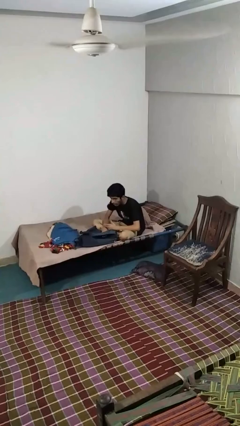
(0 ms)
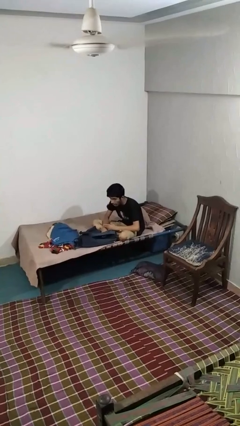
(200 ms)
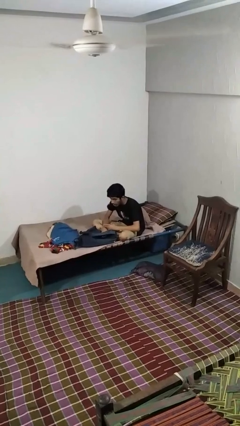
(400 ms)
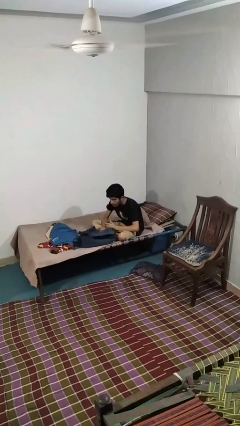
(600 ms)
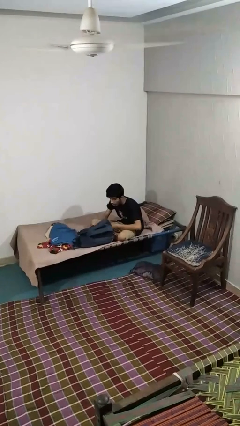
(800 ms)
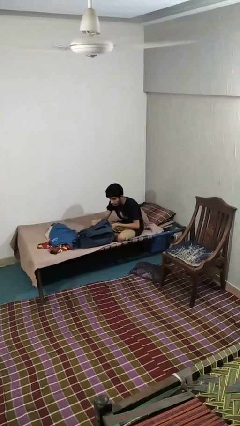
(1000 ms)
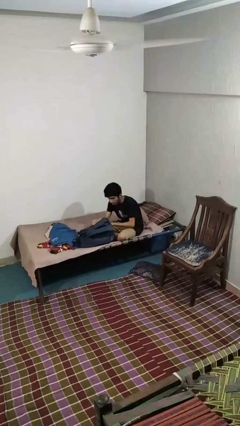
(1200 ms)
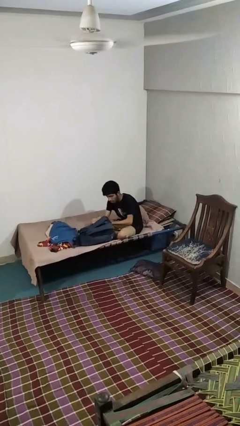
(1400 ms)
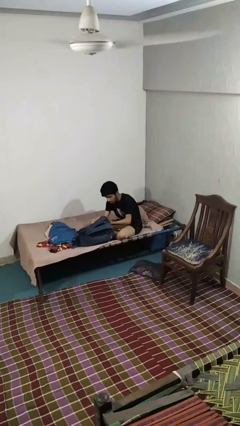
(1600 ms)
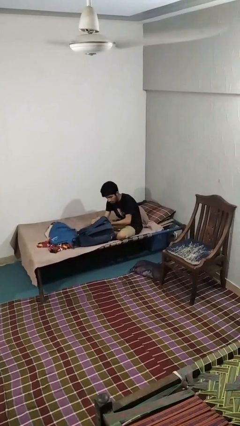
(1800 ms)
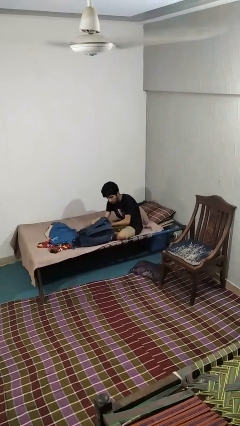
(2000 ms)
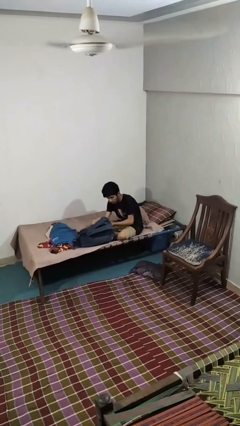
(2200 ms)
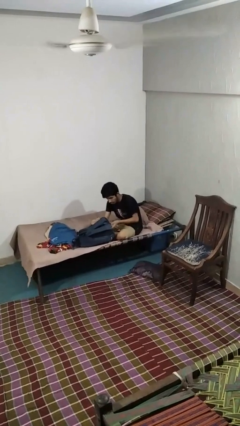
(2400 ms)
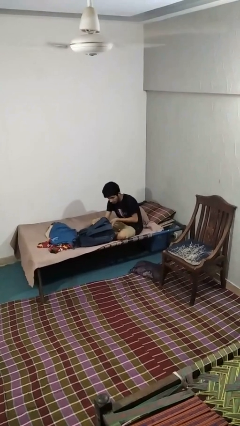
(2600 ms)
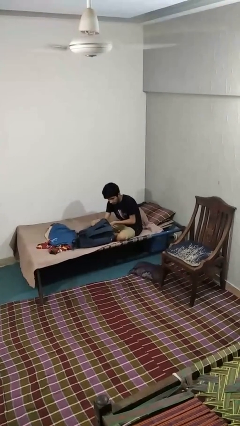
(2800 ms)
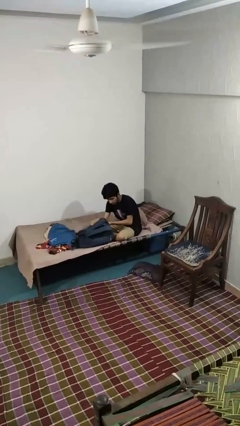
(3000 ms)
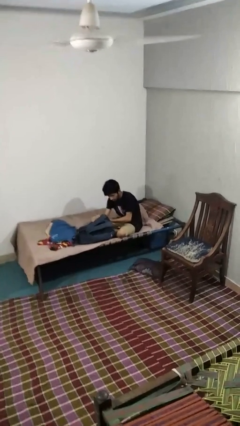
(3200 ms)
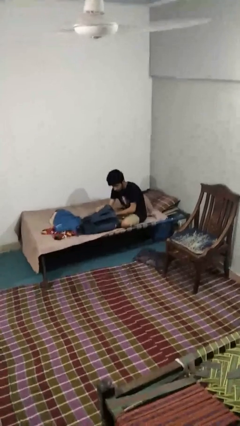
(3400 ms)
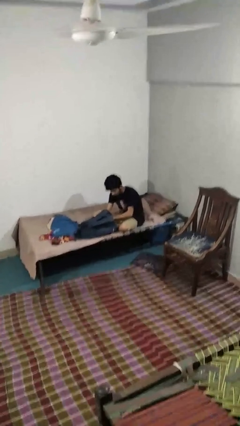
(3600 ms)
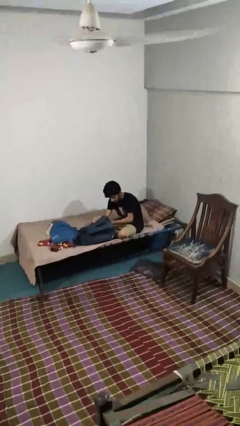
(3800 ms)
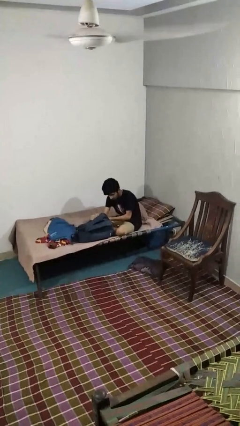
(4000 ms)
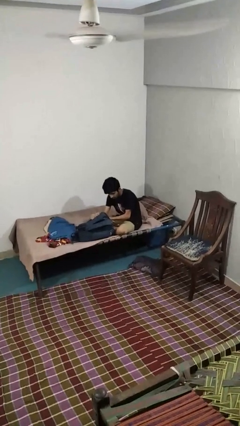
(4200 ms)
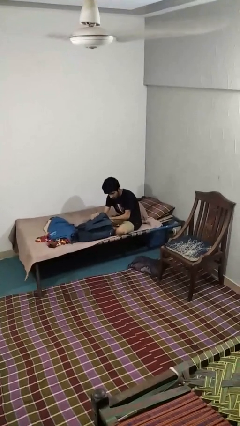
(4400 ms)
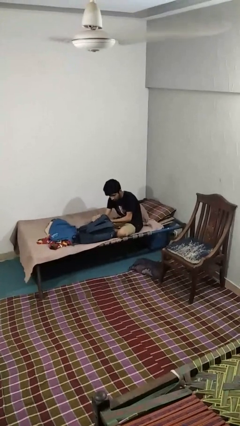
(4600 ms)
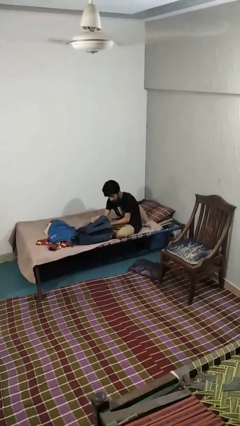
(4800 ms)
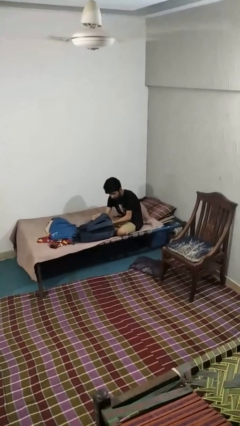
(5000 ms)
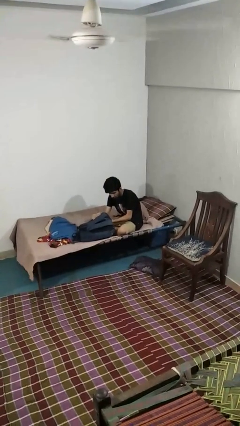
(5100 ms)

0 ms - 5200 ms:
person searches in backpack

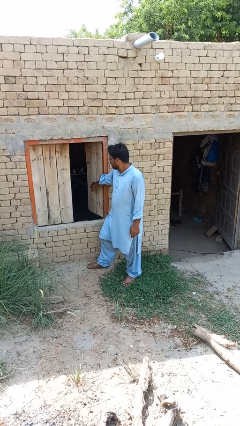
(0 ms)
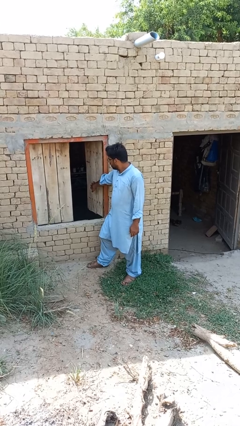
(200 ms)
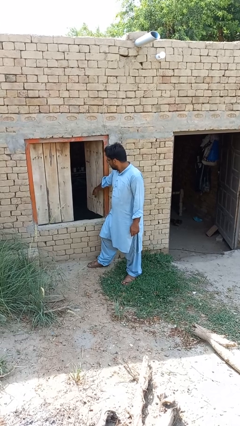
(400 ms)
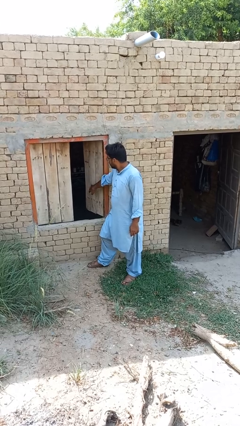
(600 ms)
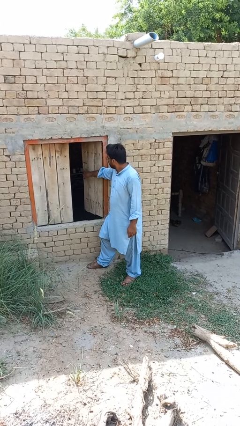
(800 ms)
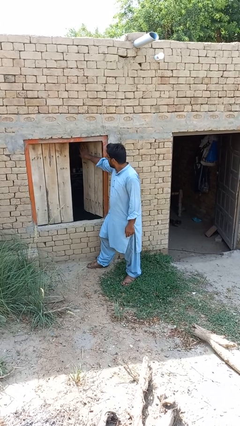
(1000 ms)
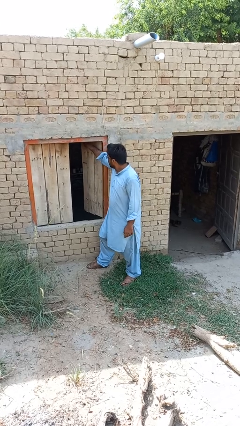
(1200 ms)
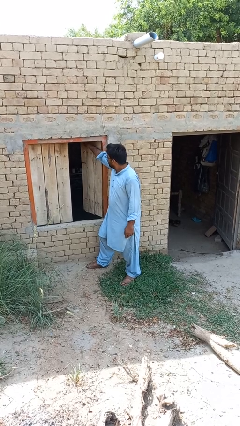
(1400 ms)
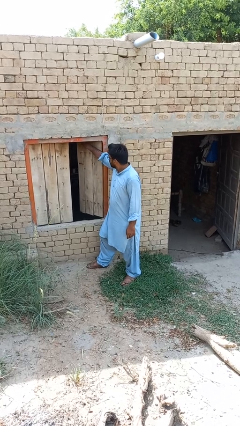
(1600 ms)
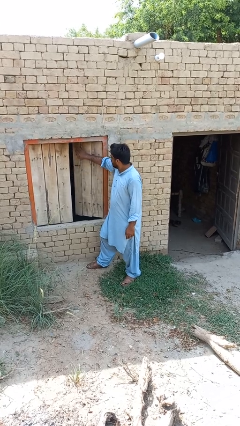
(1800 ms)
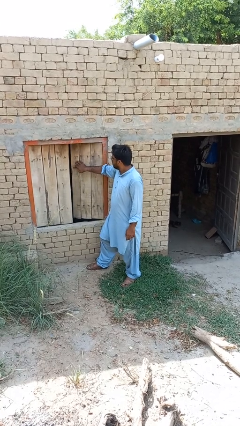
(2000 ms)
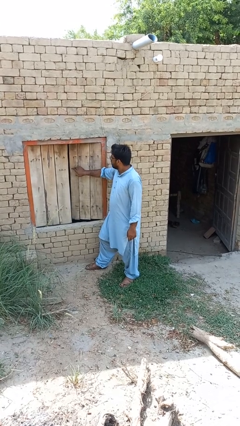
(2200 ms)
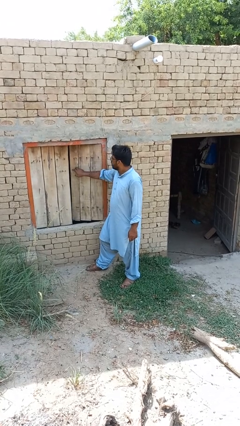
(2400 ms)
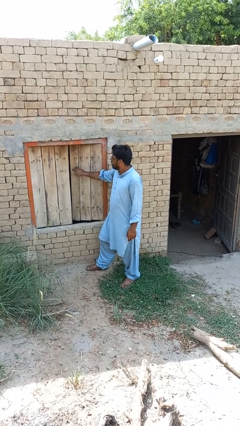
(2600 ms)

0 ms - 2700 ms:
person closes home window

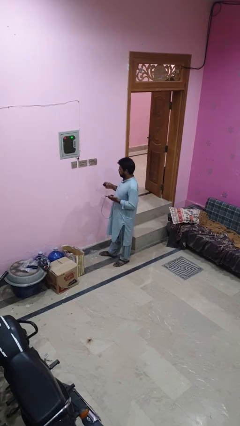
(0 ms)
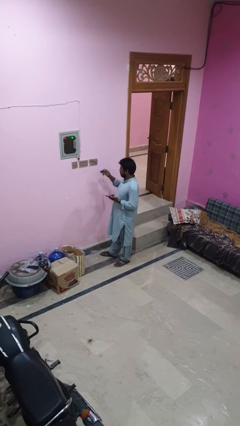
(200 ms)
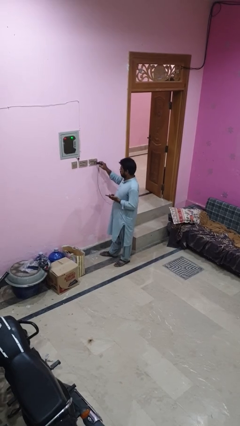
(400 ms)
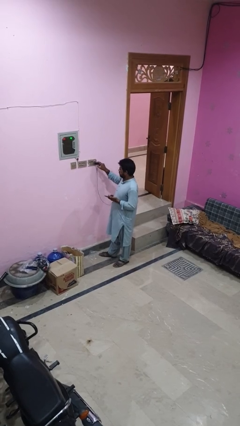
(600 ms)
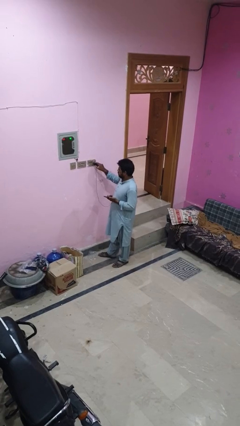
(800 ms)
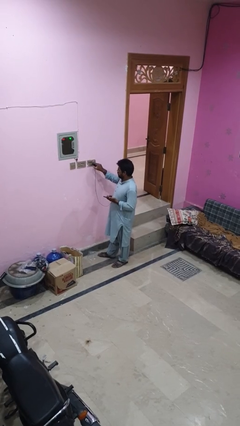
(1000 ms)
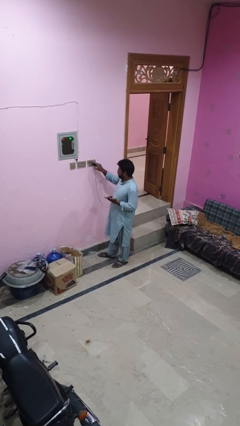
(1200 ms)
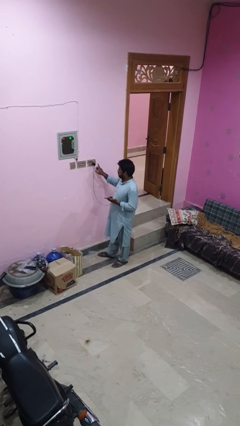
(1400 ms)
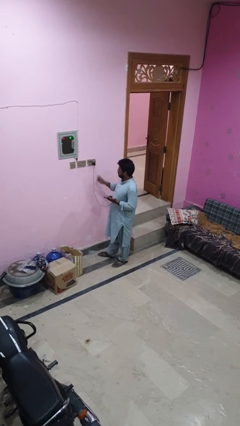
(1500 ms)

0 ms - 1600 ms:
person plugs into electrical socket

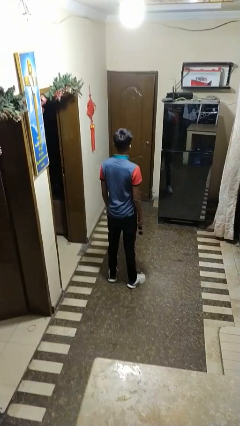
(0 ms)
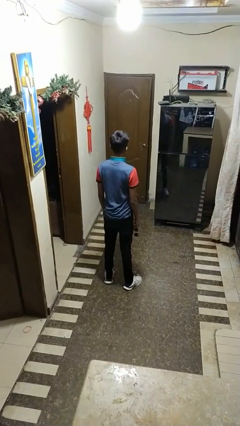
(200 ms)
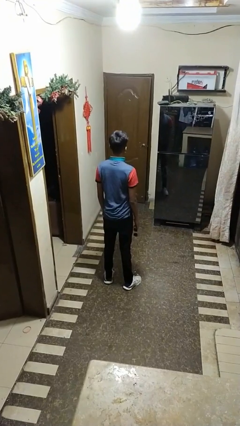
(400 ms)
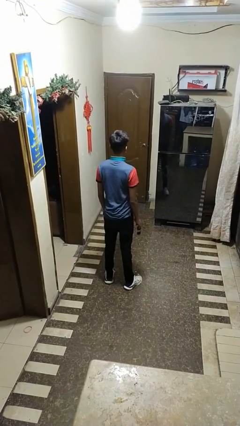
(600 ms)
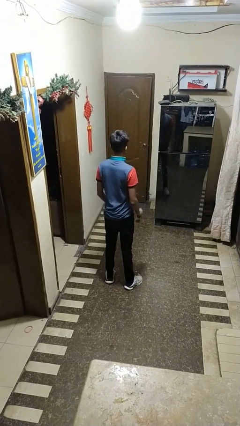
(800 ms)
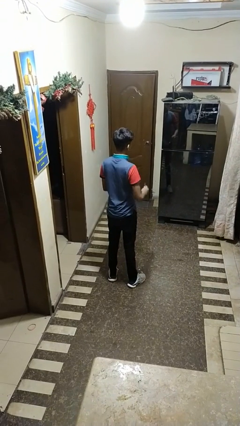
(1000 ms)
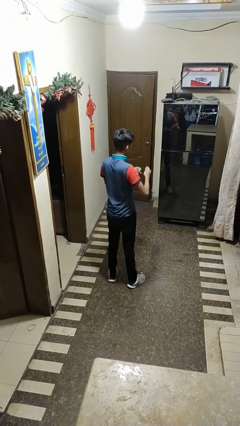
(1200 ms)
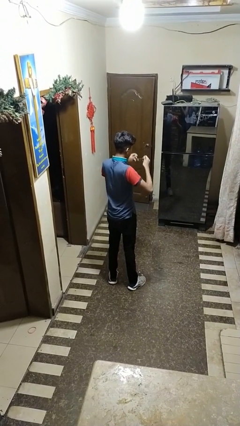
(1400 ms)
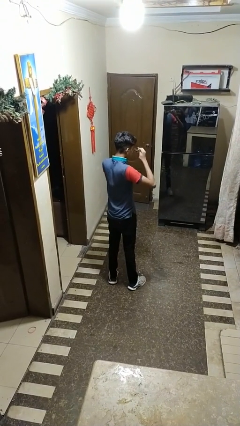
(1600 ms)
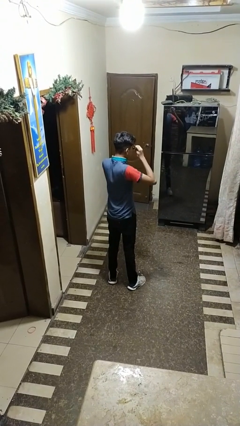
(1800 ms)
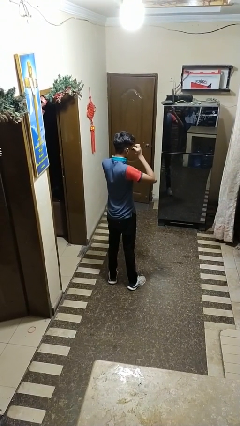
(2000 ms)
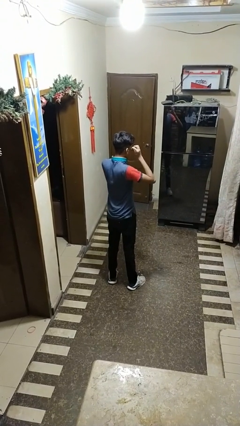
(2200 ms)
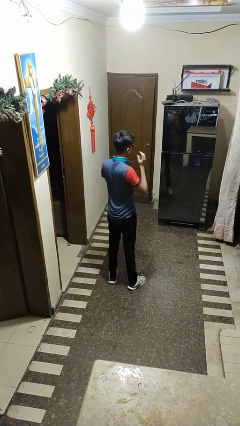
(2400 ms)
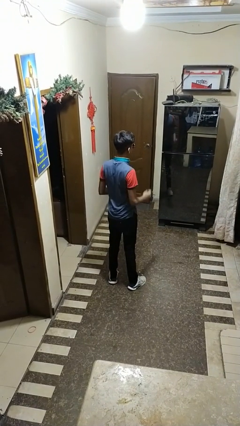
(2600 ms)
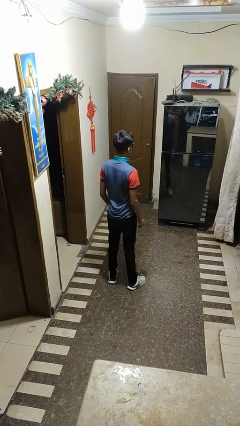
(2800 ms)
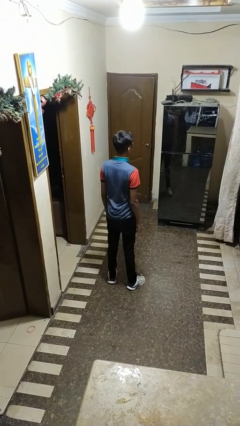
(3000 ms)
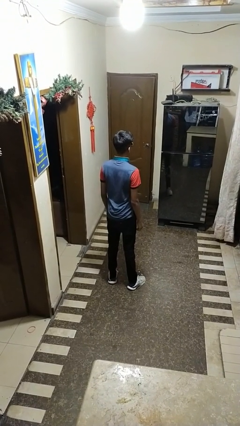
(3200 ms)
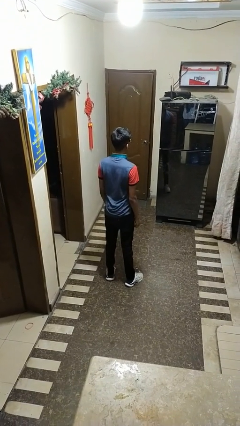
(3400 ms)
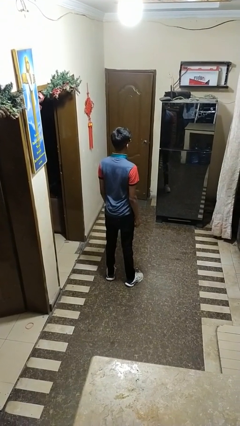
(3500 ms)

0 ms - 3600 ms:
person puts on sunglasses

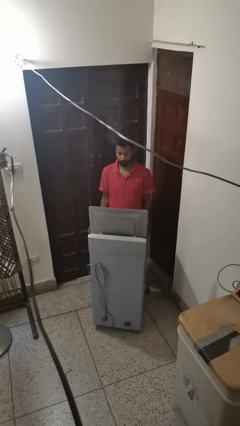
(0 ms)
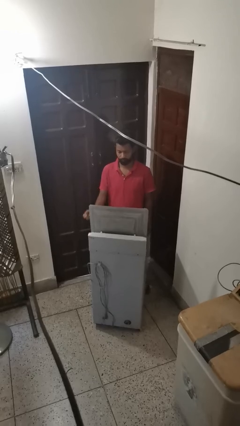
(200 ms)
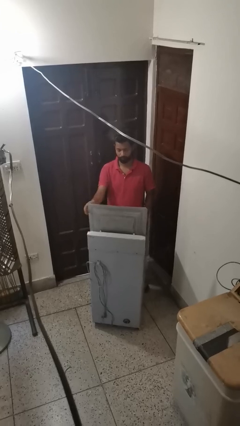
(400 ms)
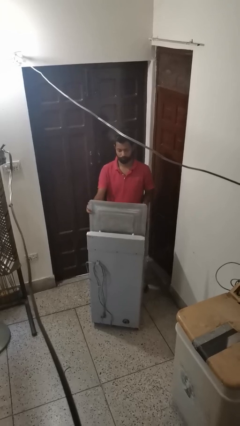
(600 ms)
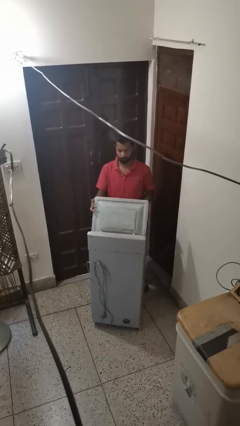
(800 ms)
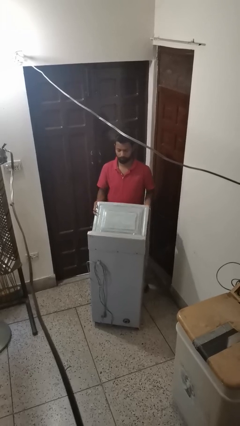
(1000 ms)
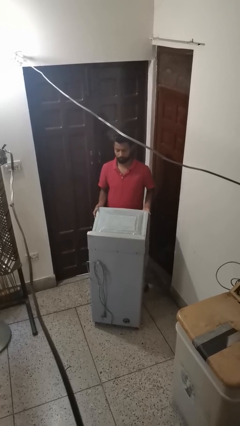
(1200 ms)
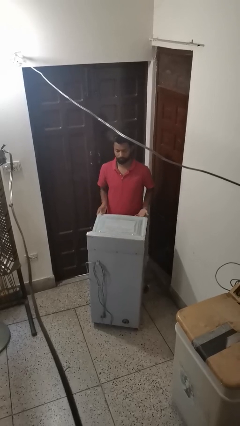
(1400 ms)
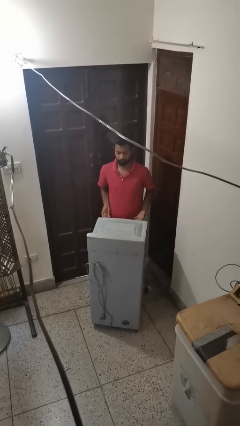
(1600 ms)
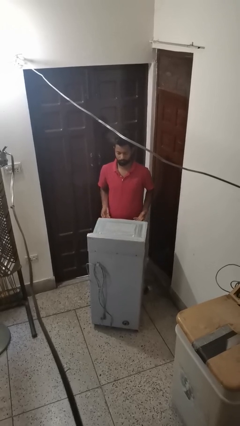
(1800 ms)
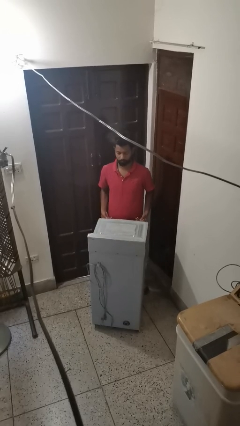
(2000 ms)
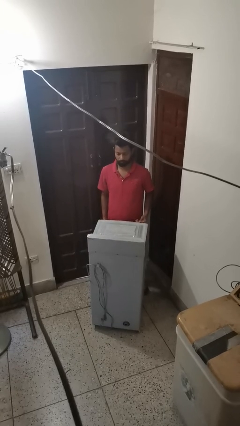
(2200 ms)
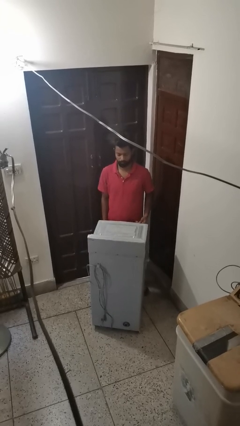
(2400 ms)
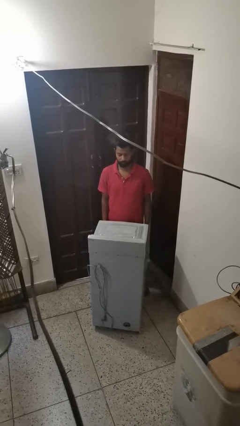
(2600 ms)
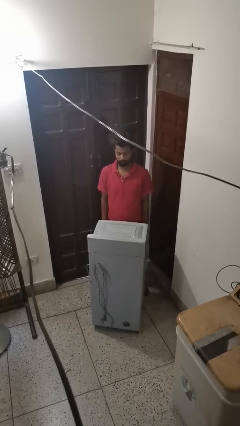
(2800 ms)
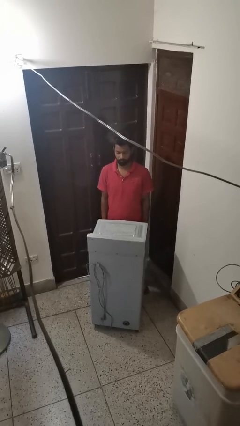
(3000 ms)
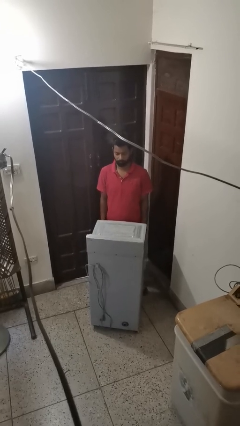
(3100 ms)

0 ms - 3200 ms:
person closes clothes washer

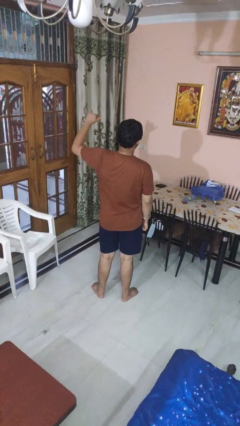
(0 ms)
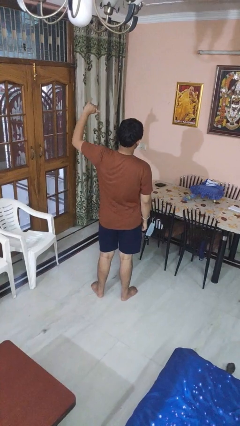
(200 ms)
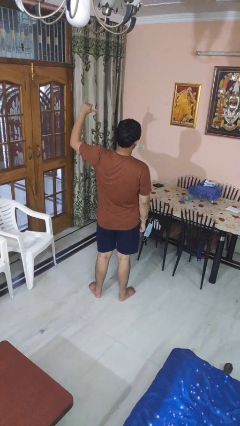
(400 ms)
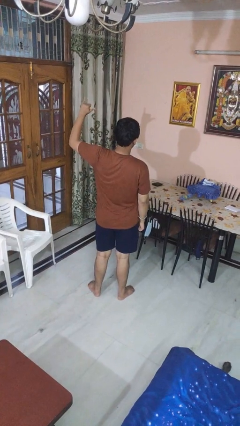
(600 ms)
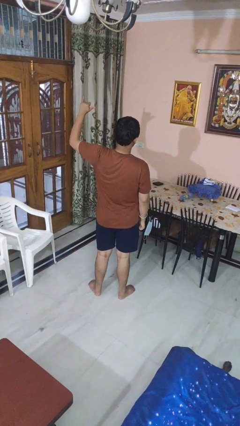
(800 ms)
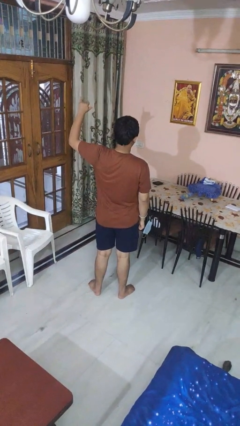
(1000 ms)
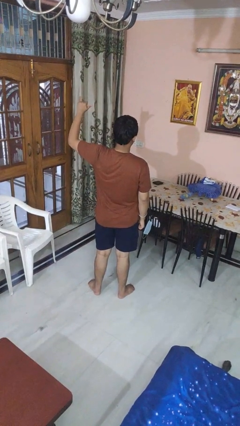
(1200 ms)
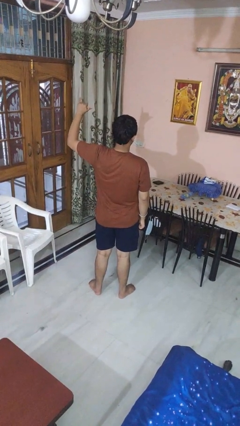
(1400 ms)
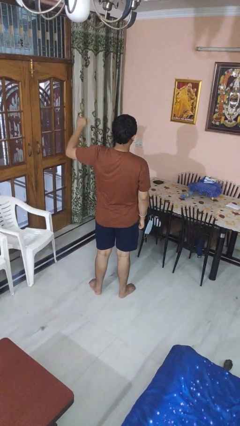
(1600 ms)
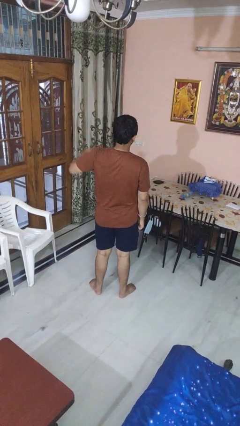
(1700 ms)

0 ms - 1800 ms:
person gestures hang loose
